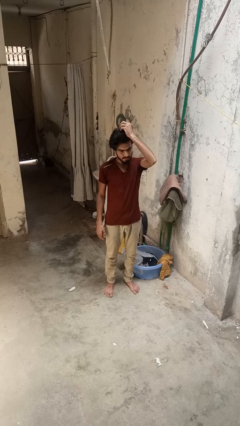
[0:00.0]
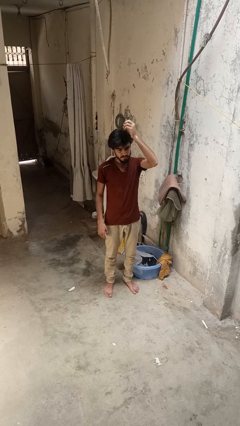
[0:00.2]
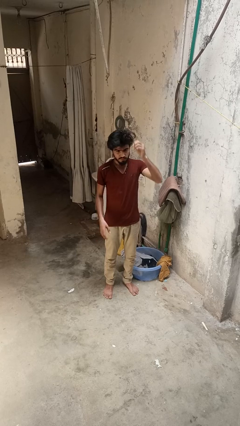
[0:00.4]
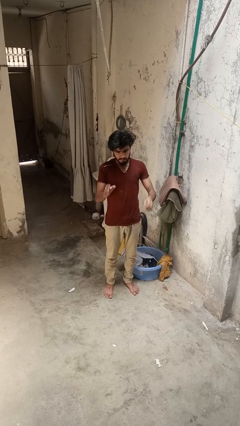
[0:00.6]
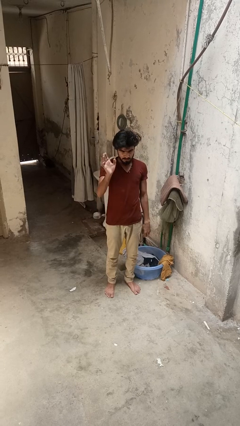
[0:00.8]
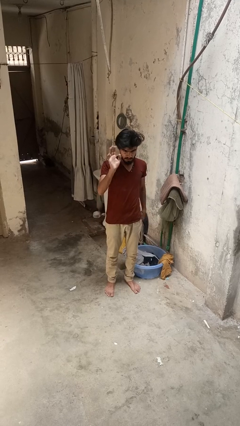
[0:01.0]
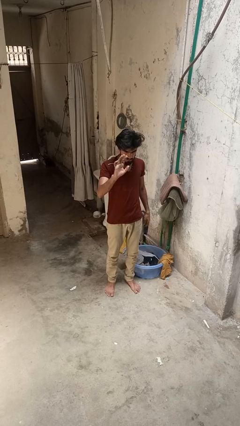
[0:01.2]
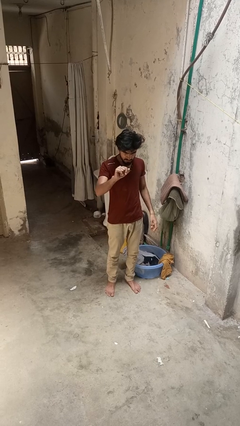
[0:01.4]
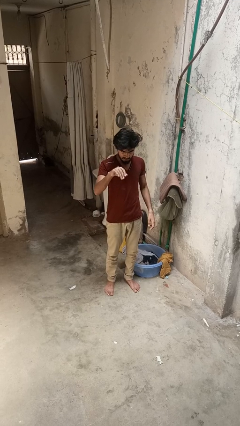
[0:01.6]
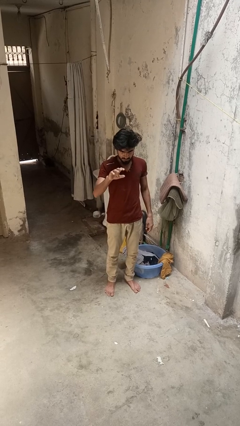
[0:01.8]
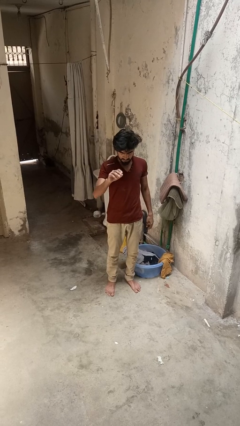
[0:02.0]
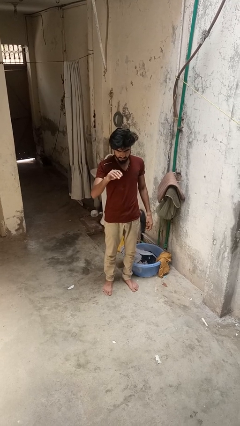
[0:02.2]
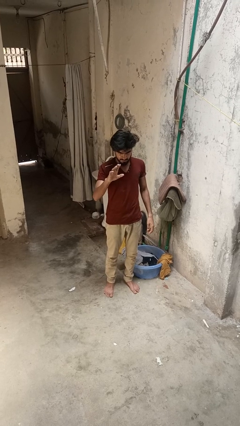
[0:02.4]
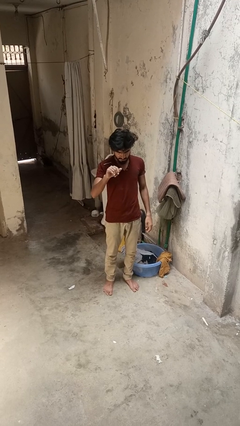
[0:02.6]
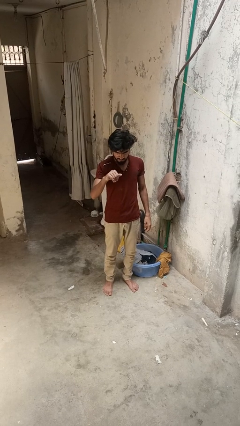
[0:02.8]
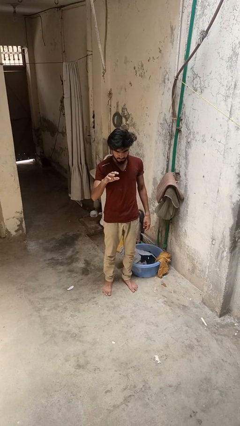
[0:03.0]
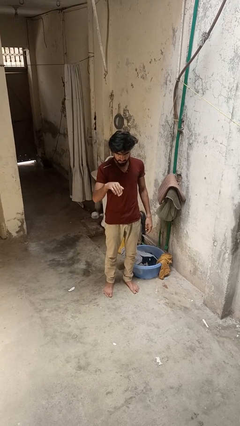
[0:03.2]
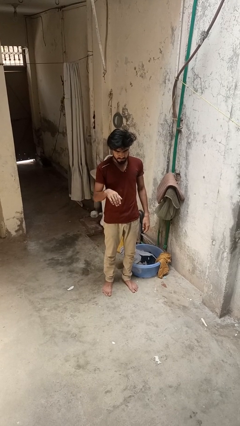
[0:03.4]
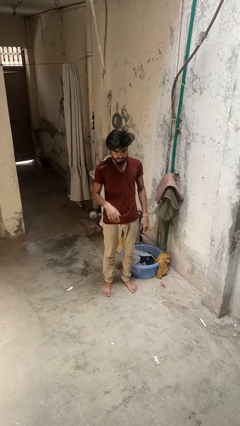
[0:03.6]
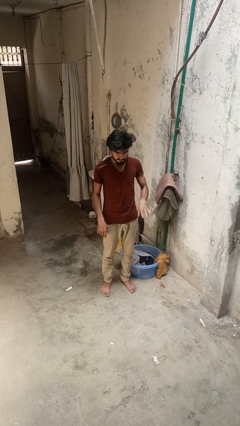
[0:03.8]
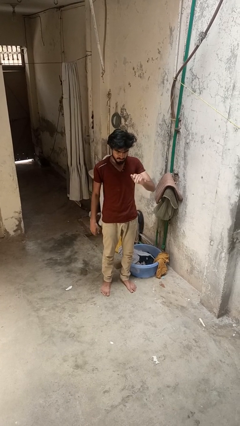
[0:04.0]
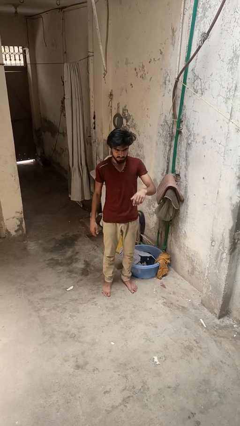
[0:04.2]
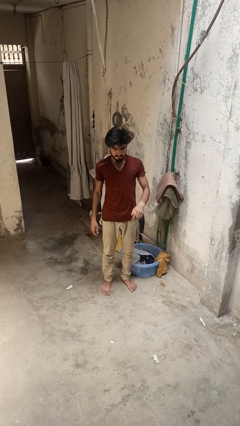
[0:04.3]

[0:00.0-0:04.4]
person gestures come here

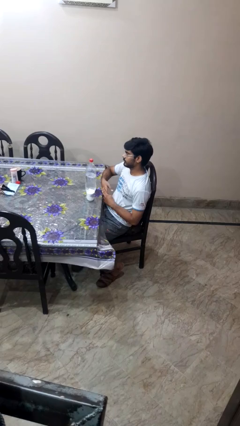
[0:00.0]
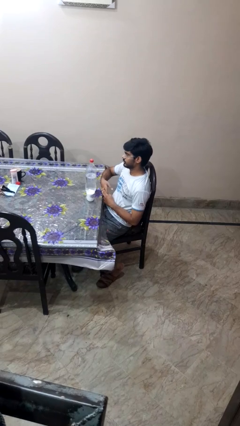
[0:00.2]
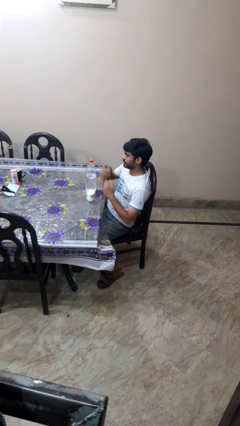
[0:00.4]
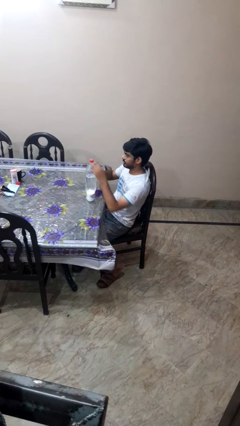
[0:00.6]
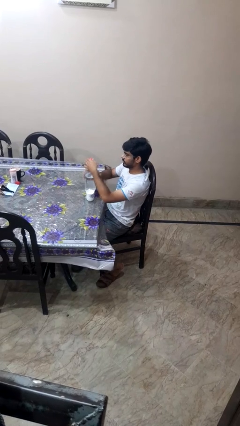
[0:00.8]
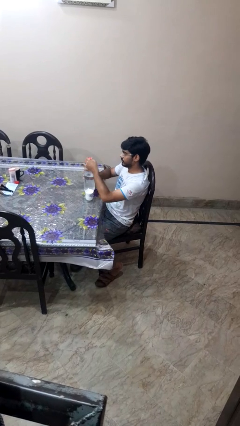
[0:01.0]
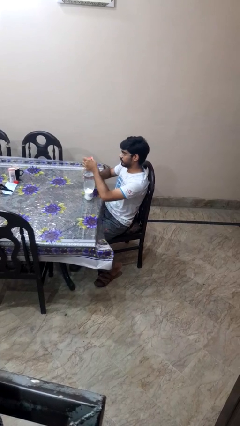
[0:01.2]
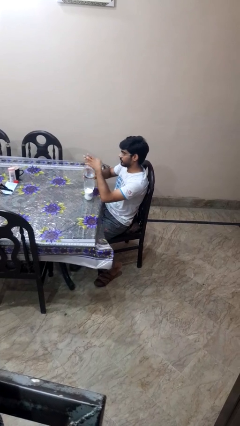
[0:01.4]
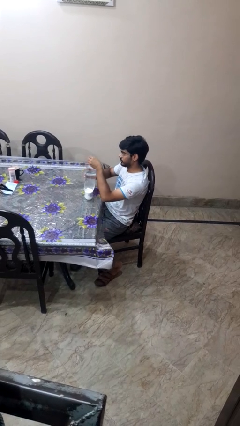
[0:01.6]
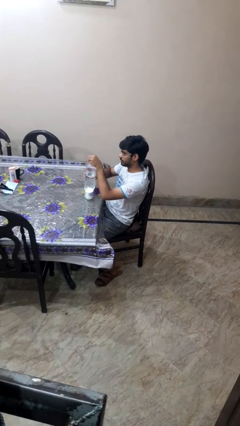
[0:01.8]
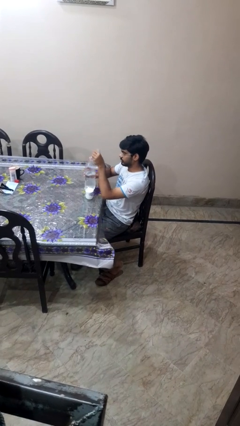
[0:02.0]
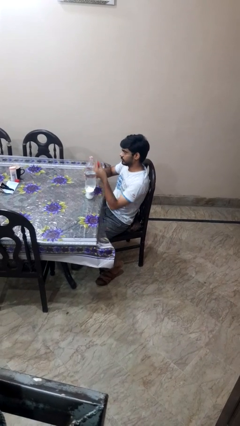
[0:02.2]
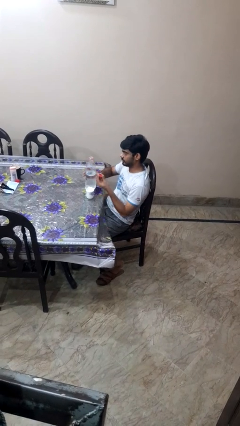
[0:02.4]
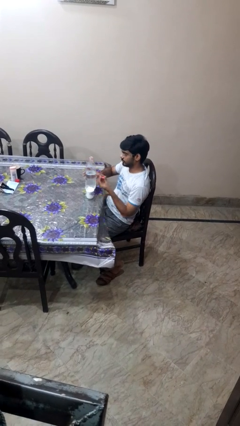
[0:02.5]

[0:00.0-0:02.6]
person unscrews lid from bottle

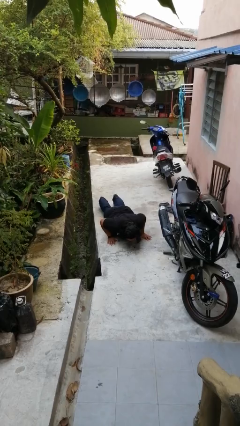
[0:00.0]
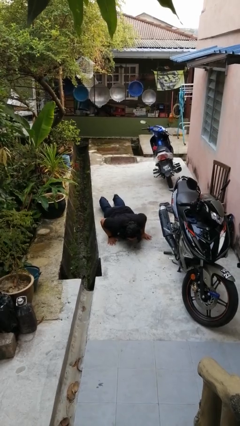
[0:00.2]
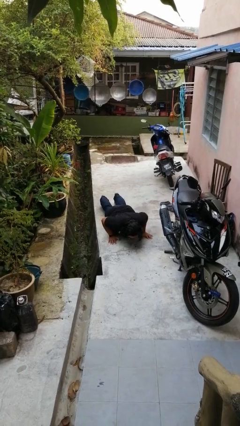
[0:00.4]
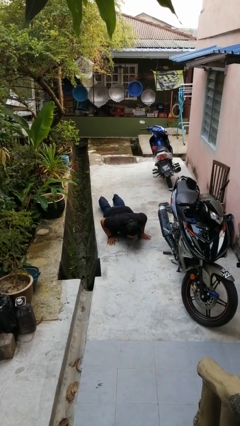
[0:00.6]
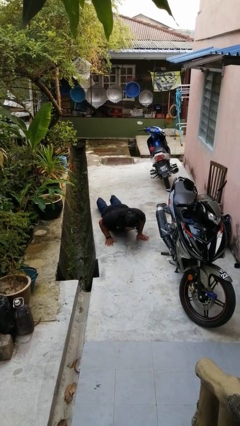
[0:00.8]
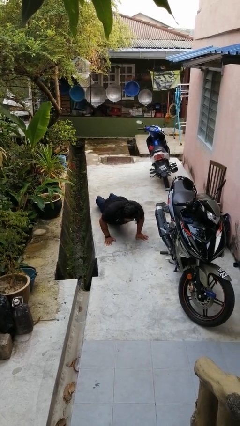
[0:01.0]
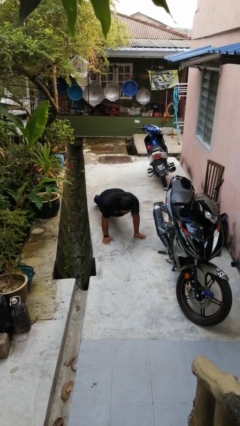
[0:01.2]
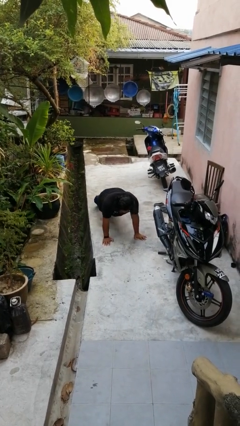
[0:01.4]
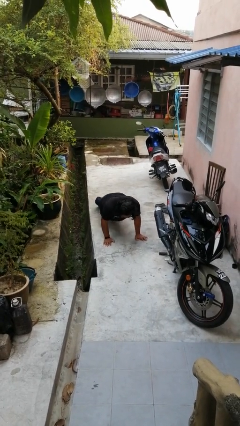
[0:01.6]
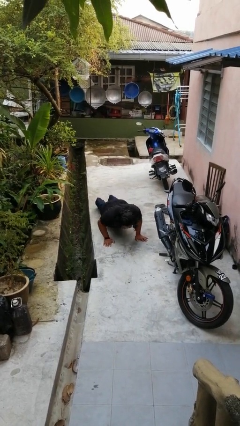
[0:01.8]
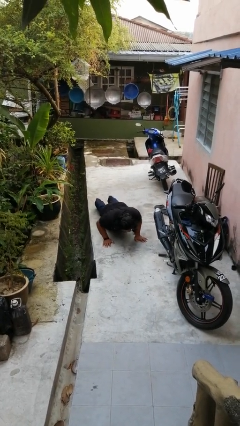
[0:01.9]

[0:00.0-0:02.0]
person exercises with pushup

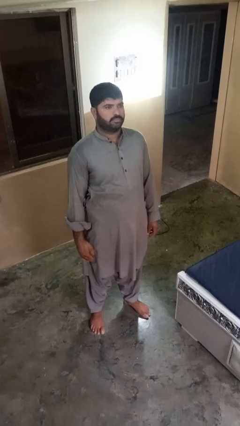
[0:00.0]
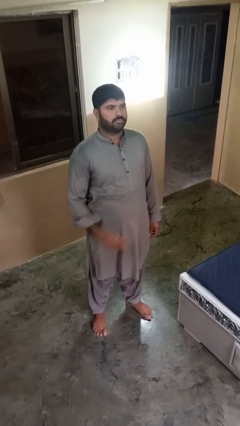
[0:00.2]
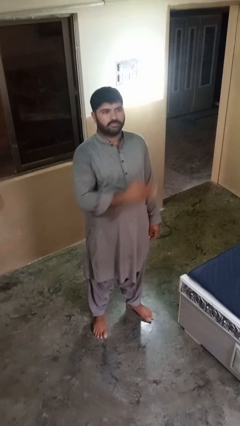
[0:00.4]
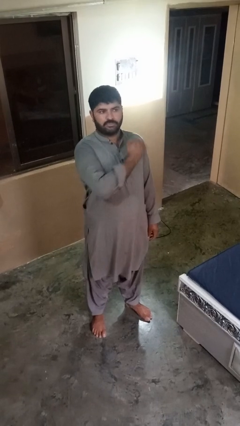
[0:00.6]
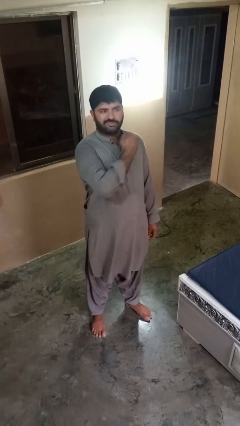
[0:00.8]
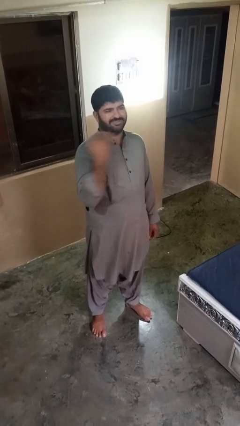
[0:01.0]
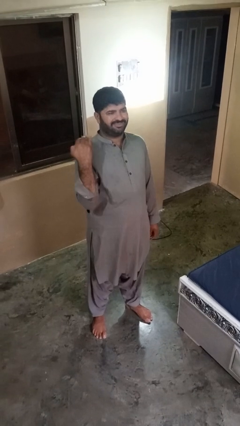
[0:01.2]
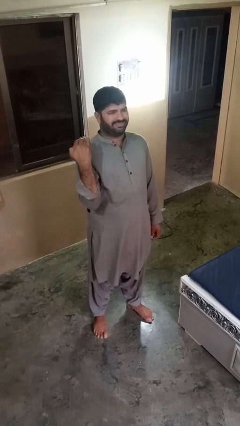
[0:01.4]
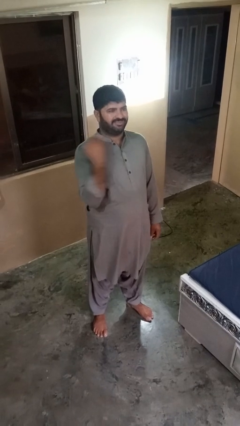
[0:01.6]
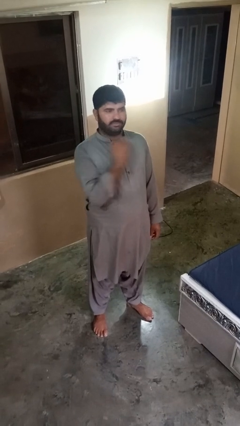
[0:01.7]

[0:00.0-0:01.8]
person gestures cut

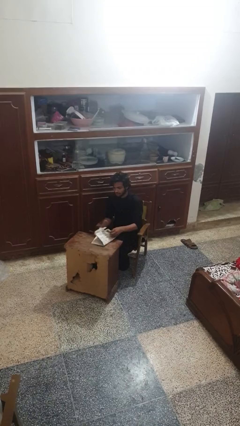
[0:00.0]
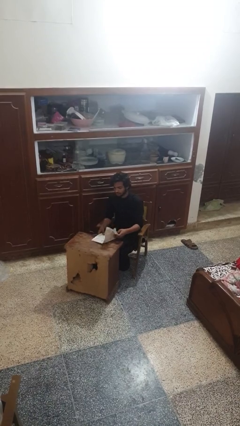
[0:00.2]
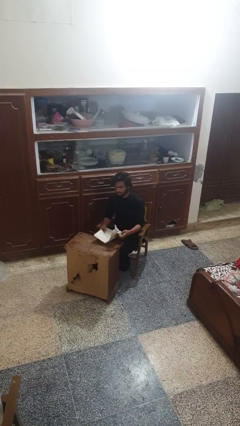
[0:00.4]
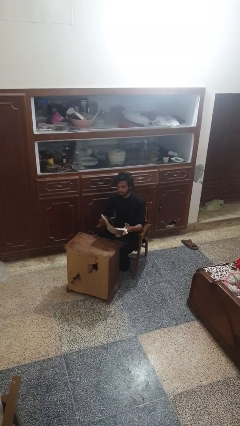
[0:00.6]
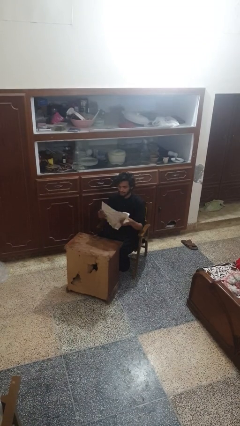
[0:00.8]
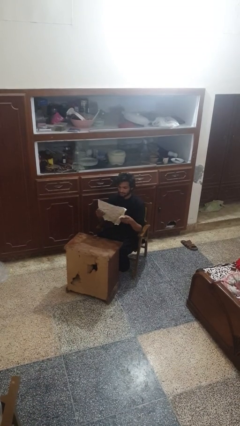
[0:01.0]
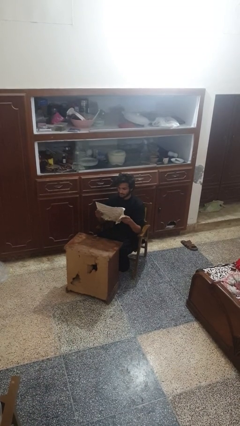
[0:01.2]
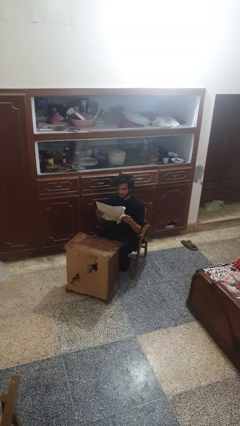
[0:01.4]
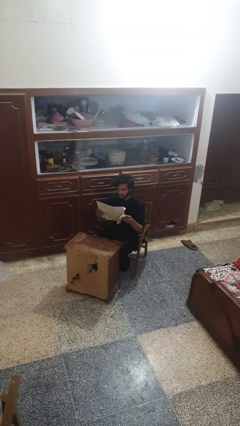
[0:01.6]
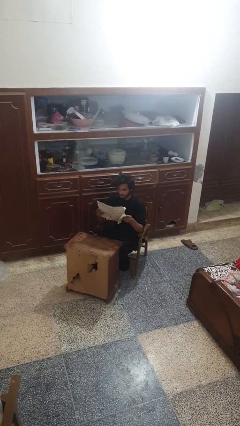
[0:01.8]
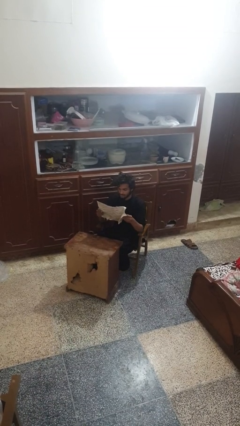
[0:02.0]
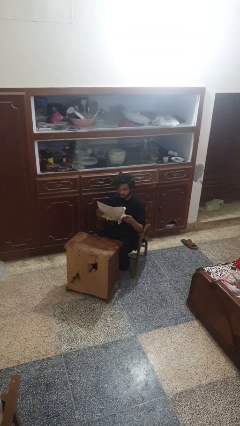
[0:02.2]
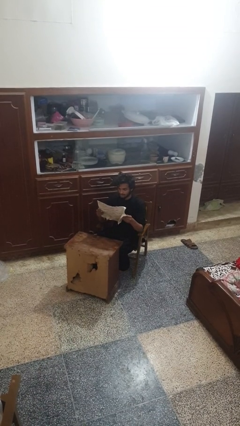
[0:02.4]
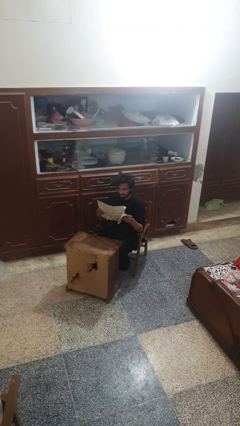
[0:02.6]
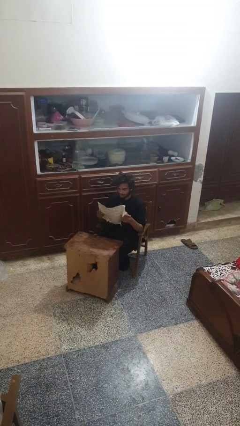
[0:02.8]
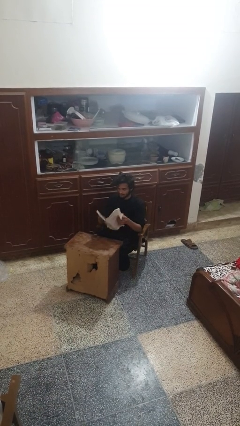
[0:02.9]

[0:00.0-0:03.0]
person reads newspaper

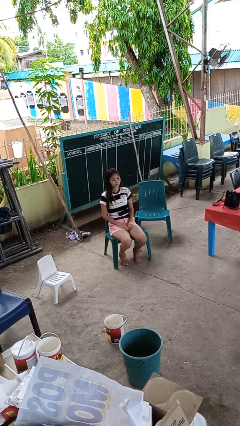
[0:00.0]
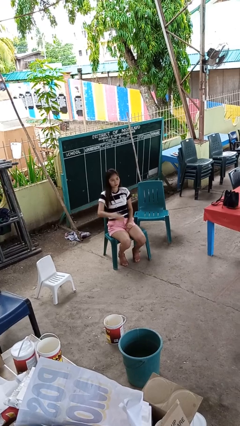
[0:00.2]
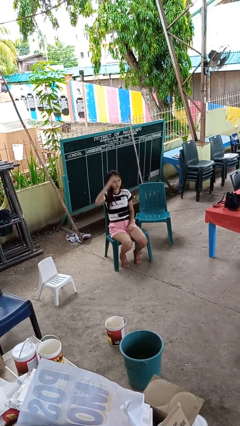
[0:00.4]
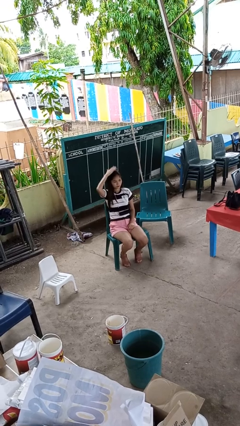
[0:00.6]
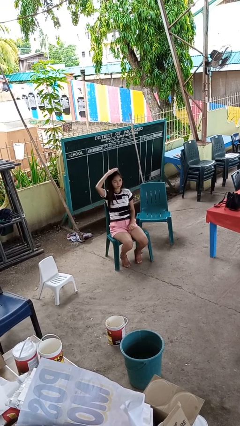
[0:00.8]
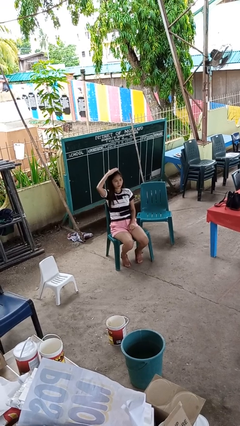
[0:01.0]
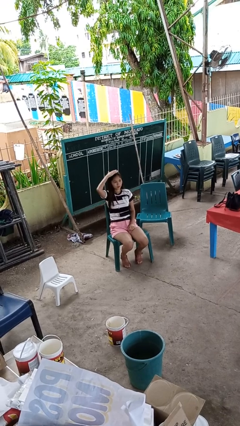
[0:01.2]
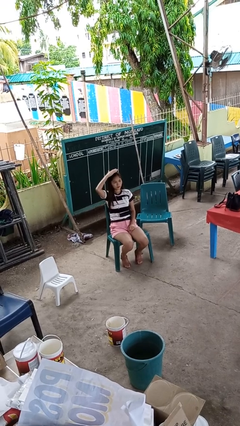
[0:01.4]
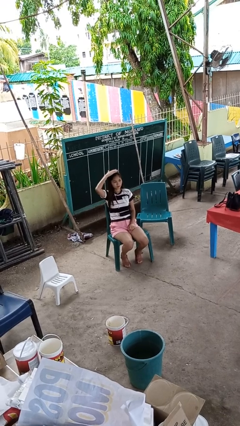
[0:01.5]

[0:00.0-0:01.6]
person pats head

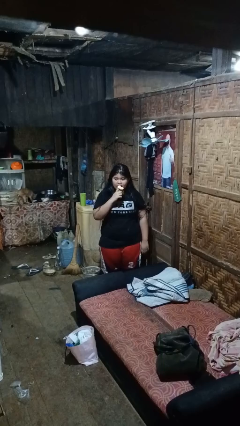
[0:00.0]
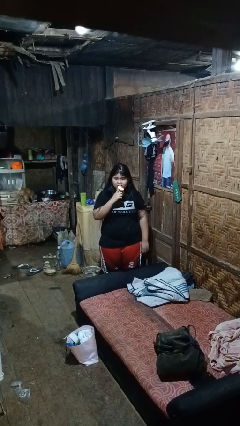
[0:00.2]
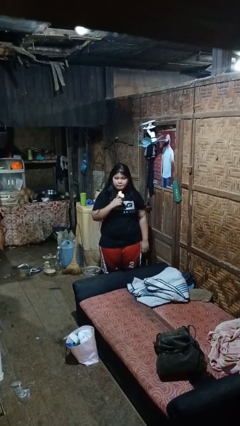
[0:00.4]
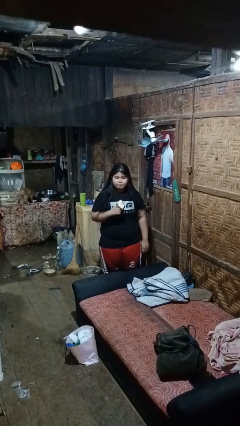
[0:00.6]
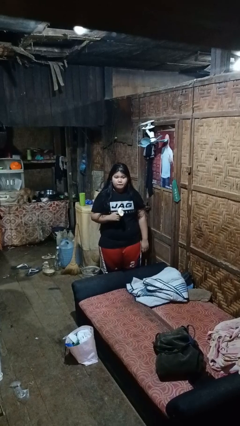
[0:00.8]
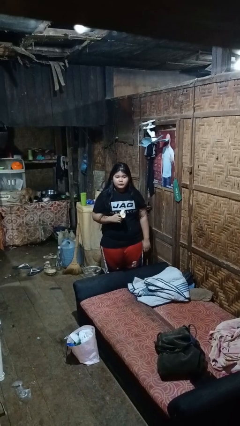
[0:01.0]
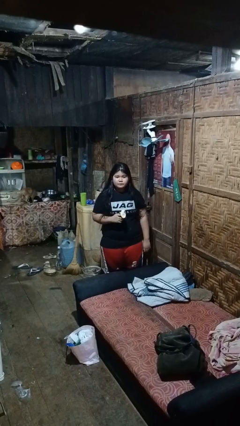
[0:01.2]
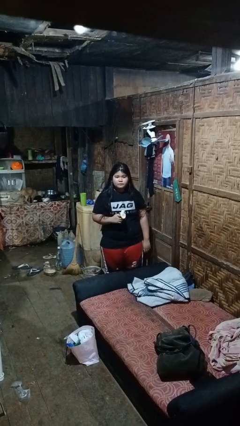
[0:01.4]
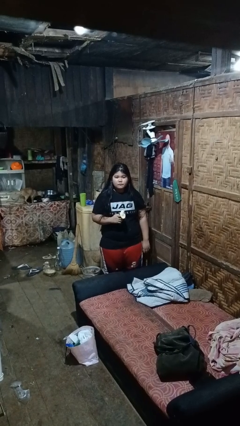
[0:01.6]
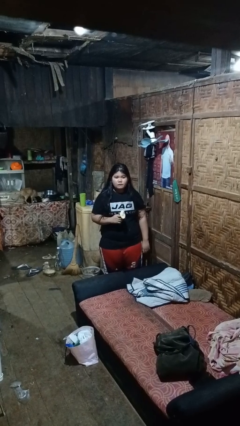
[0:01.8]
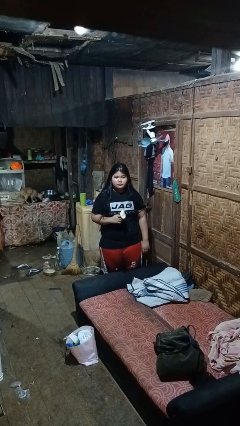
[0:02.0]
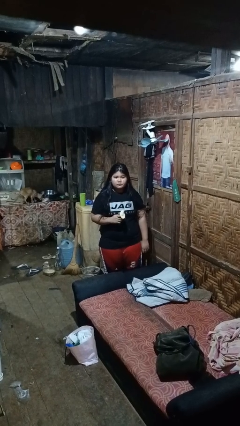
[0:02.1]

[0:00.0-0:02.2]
person eats banana
